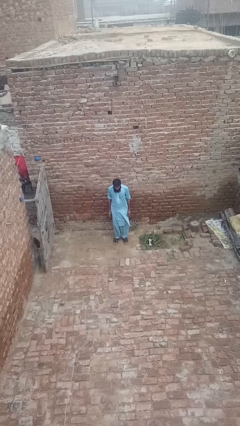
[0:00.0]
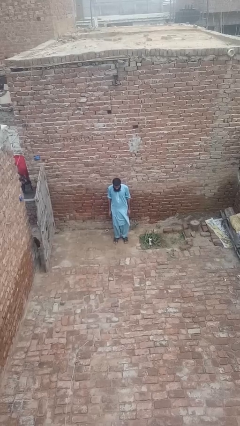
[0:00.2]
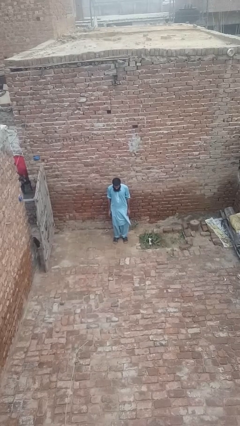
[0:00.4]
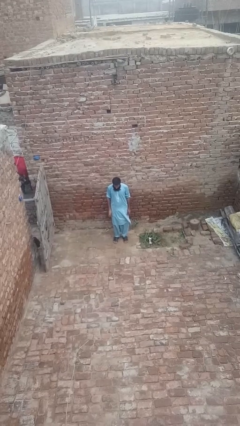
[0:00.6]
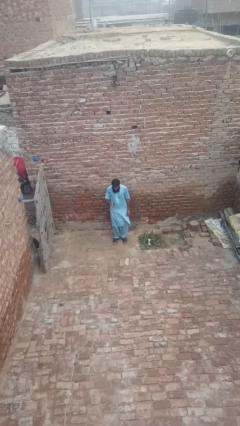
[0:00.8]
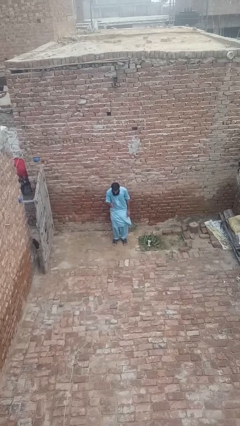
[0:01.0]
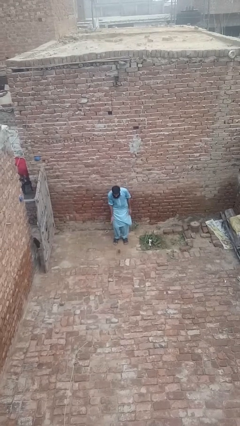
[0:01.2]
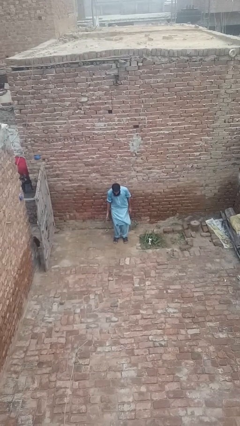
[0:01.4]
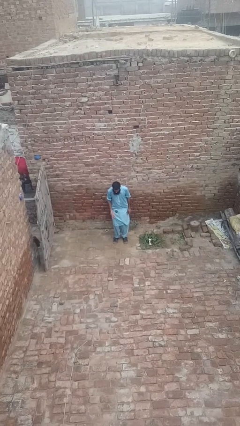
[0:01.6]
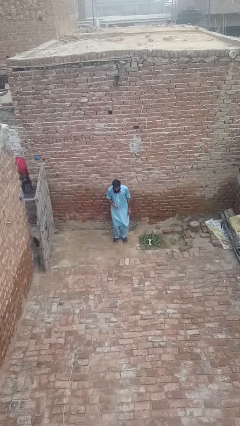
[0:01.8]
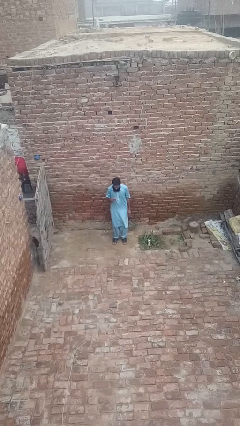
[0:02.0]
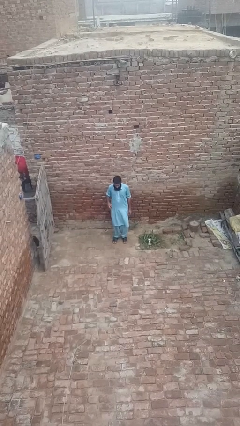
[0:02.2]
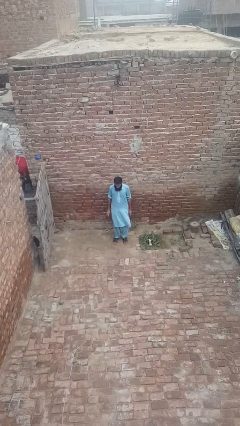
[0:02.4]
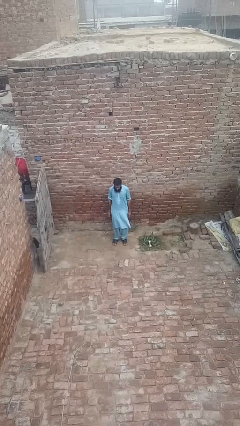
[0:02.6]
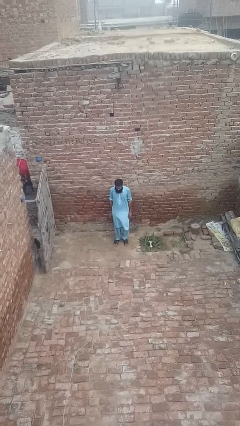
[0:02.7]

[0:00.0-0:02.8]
person bounces ball on floor

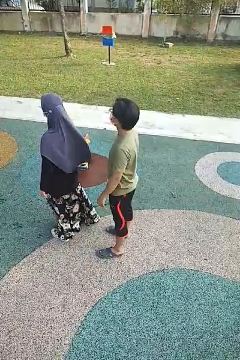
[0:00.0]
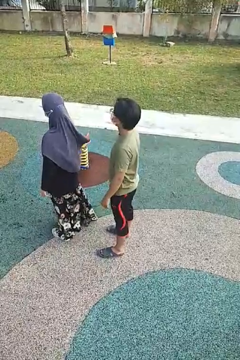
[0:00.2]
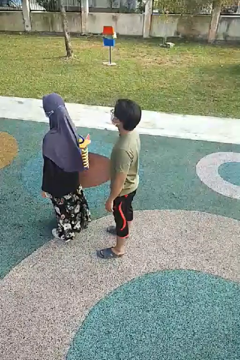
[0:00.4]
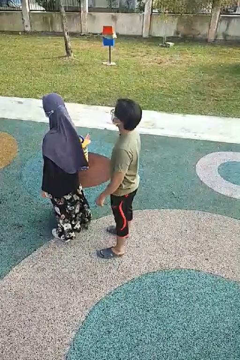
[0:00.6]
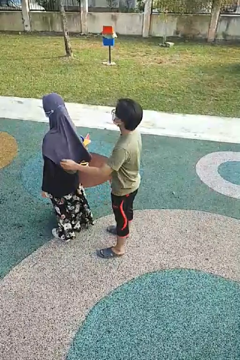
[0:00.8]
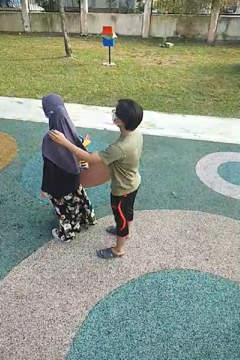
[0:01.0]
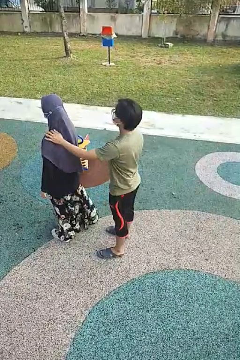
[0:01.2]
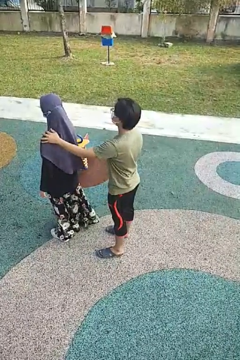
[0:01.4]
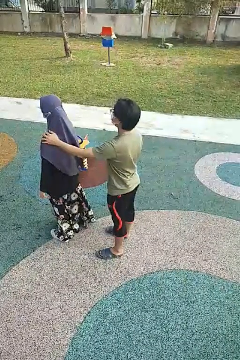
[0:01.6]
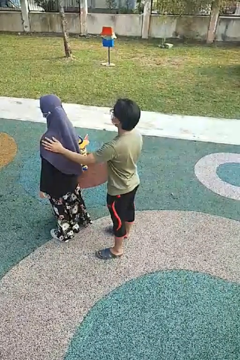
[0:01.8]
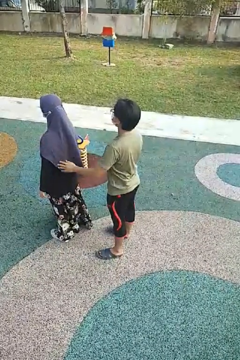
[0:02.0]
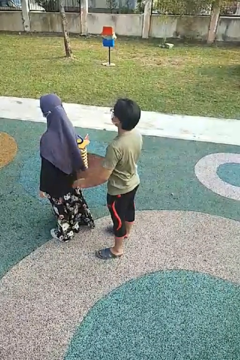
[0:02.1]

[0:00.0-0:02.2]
person touches back of person

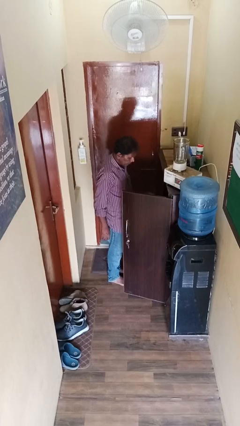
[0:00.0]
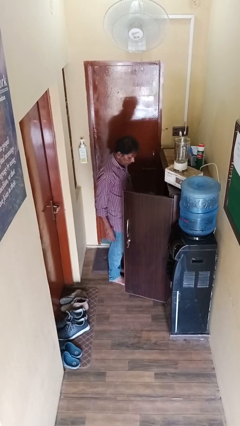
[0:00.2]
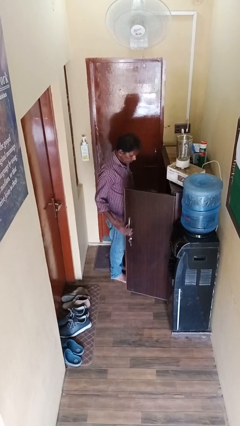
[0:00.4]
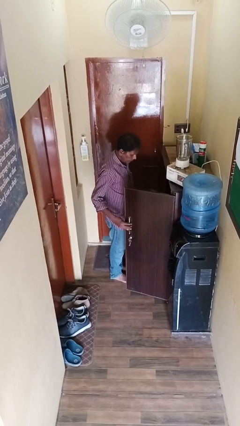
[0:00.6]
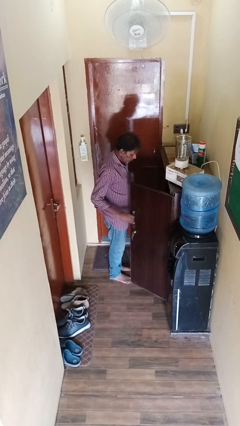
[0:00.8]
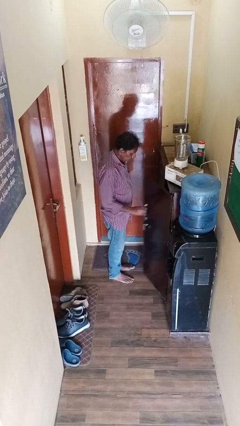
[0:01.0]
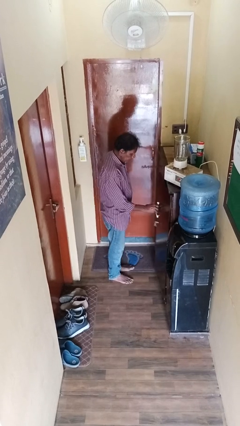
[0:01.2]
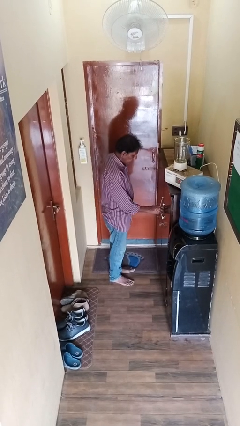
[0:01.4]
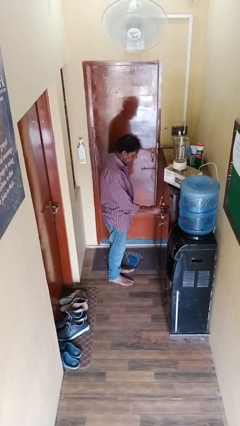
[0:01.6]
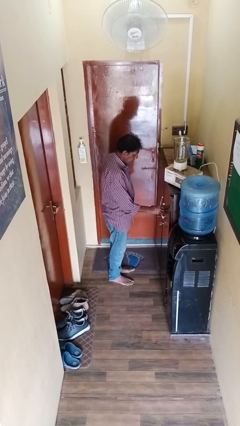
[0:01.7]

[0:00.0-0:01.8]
person closes cabinet

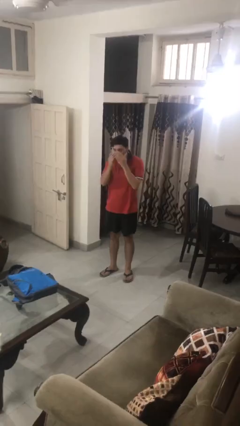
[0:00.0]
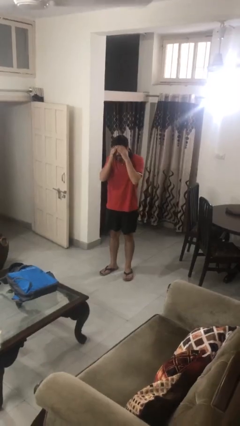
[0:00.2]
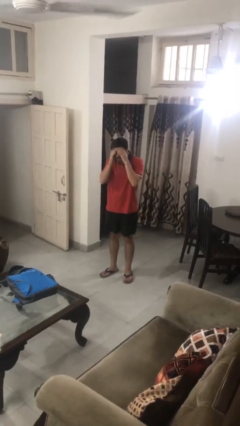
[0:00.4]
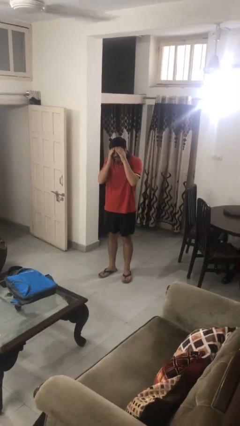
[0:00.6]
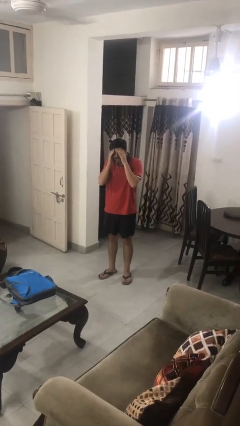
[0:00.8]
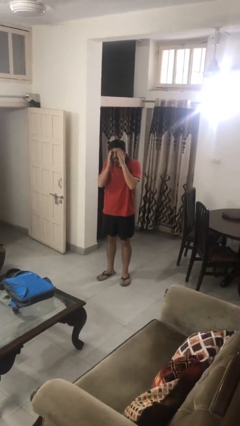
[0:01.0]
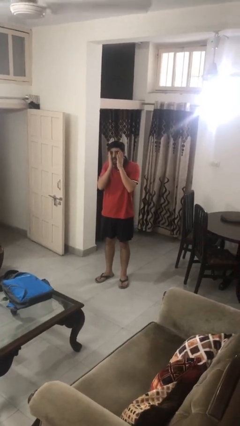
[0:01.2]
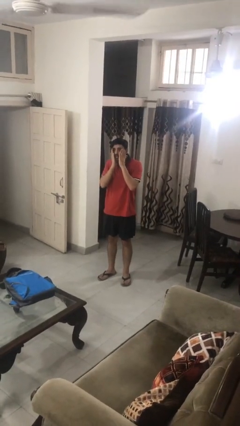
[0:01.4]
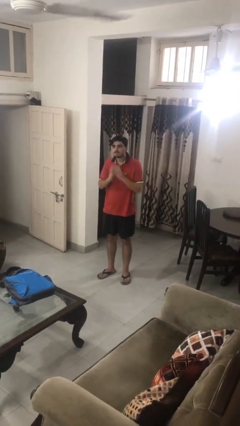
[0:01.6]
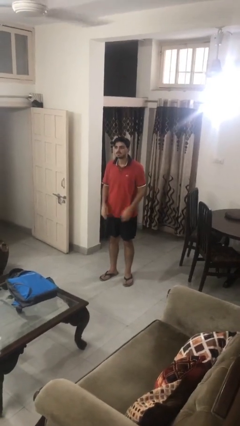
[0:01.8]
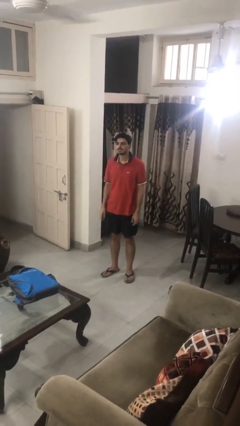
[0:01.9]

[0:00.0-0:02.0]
person covers face with hands

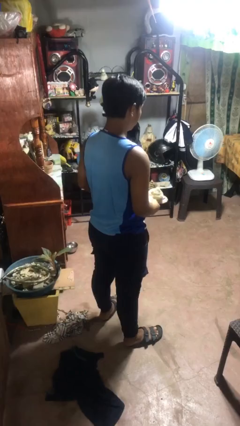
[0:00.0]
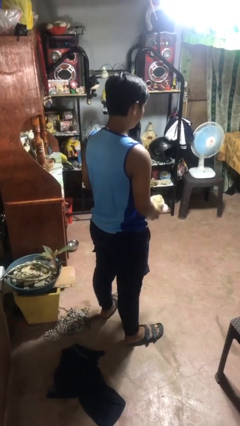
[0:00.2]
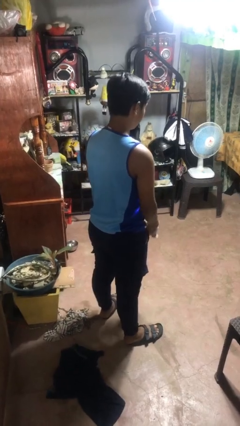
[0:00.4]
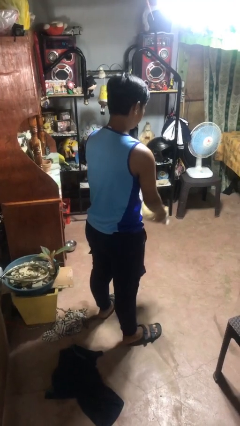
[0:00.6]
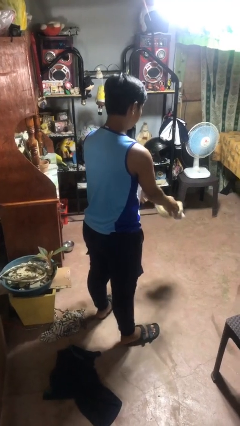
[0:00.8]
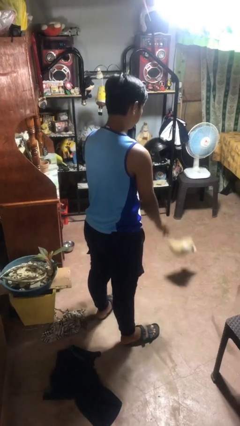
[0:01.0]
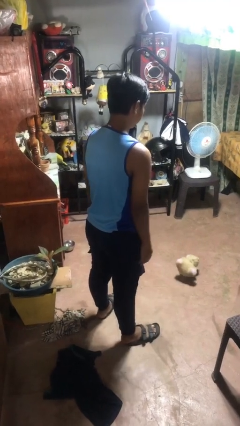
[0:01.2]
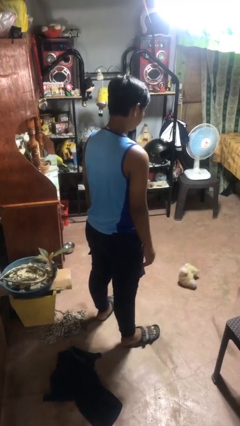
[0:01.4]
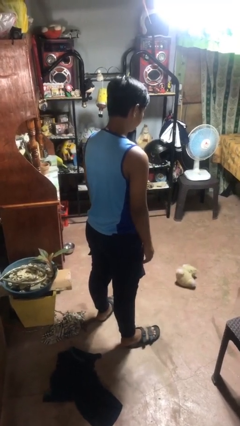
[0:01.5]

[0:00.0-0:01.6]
person throws object to ground

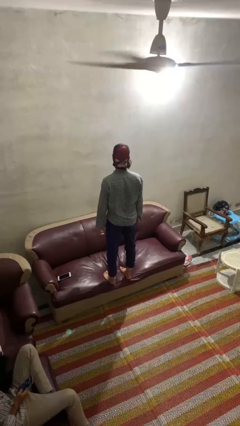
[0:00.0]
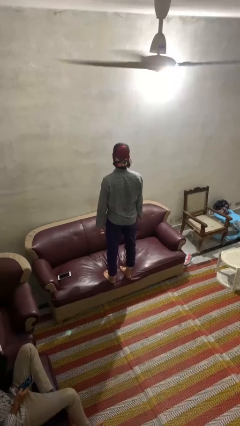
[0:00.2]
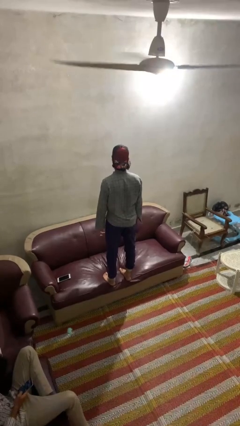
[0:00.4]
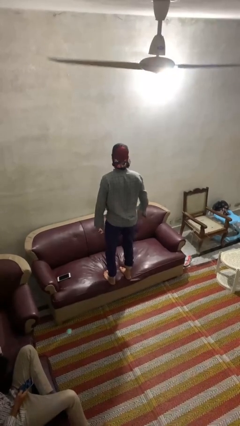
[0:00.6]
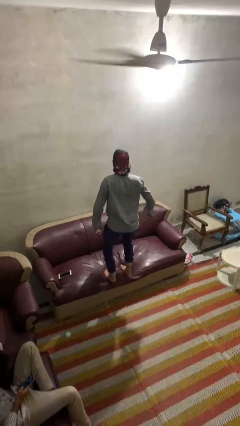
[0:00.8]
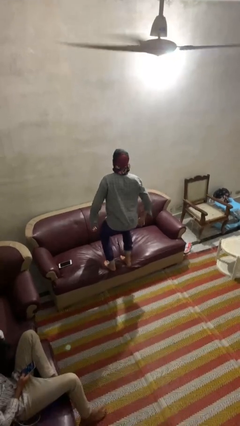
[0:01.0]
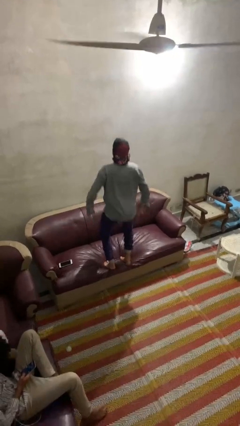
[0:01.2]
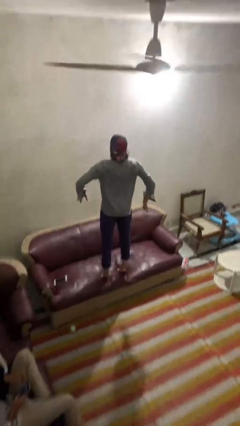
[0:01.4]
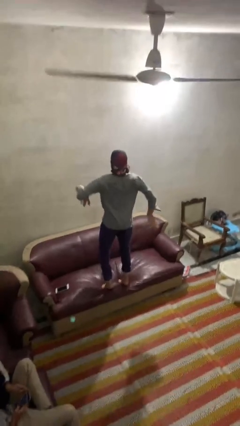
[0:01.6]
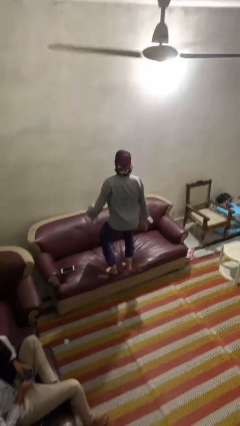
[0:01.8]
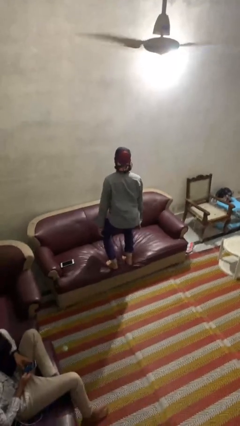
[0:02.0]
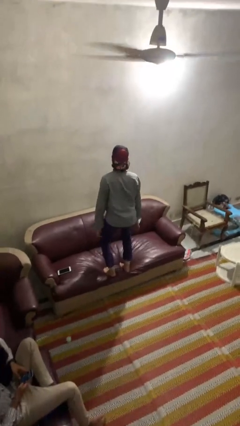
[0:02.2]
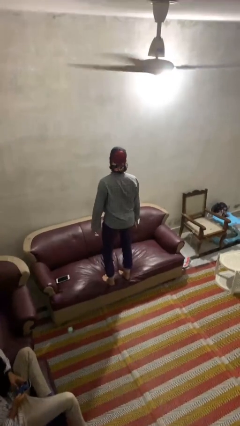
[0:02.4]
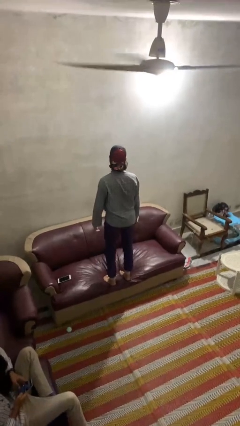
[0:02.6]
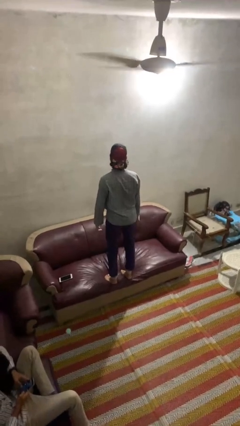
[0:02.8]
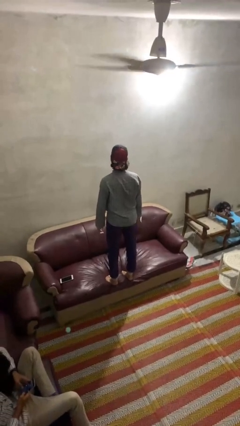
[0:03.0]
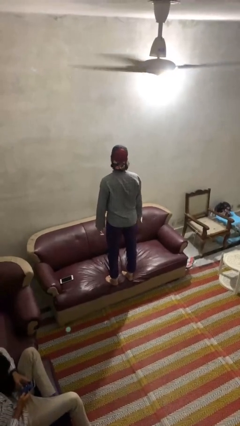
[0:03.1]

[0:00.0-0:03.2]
person jumps on couch

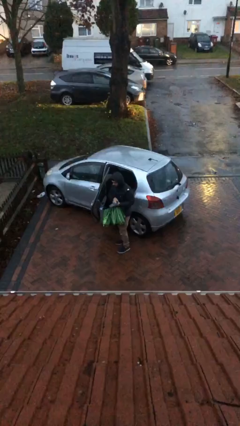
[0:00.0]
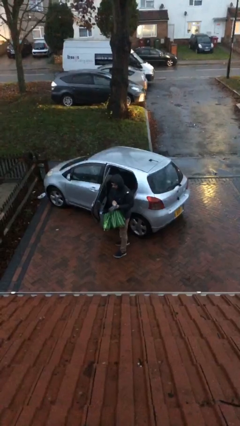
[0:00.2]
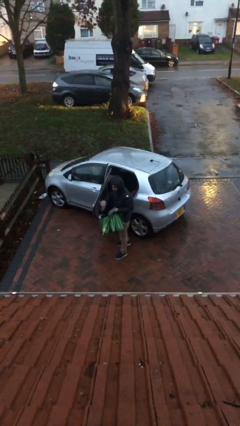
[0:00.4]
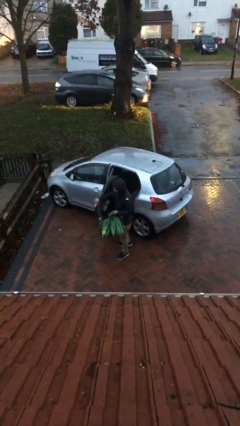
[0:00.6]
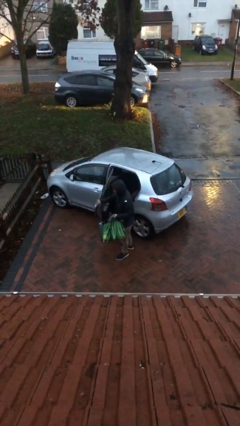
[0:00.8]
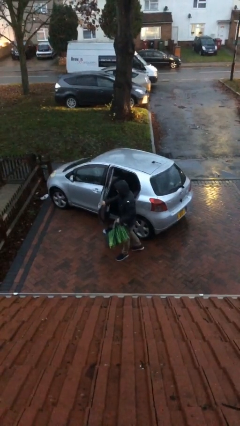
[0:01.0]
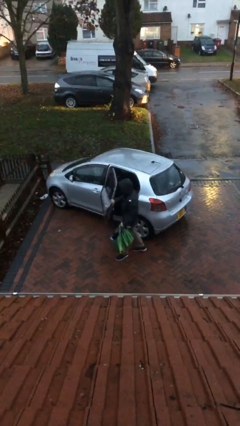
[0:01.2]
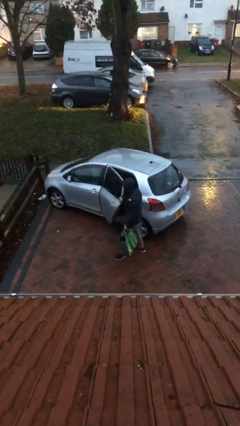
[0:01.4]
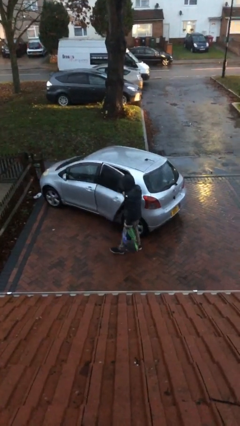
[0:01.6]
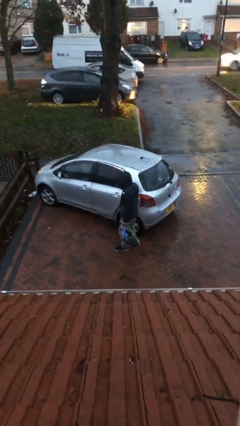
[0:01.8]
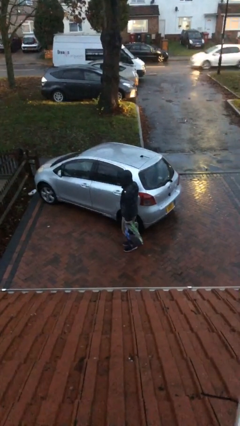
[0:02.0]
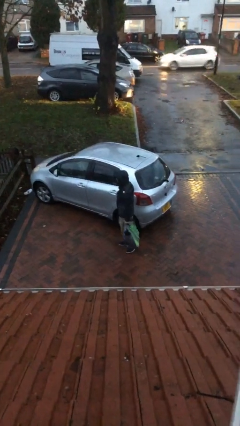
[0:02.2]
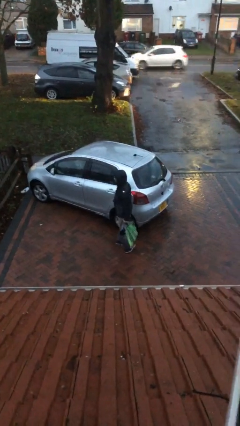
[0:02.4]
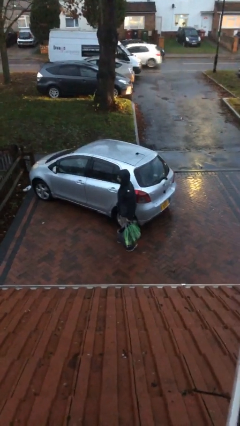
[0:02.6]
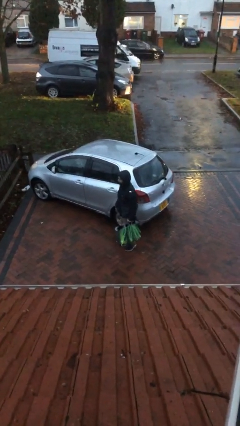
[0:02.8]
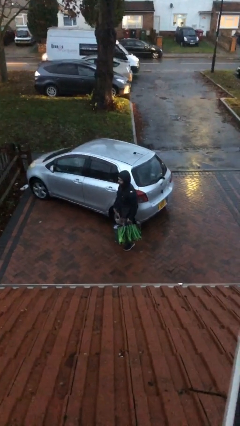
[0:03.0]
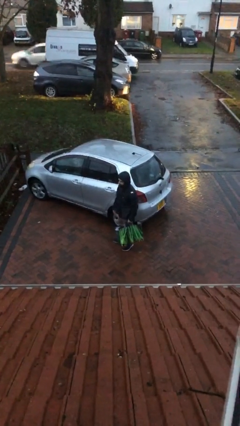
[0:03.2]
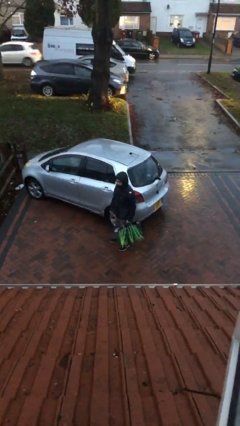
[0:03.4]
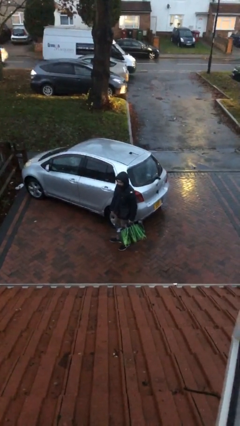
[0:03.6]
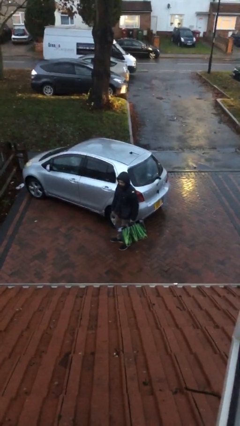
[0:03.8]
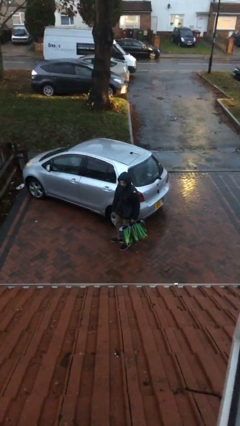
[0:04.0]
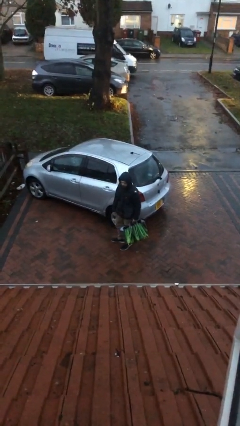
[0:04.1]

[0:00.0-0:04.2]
person closes car door
